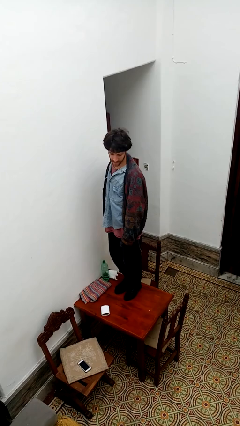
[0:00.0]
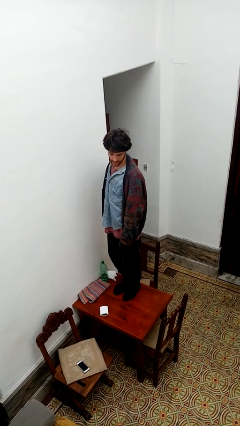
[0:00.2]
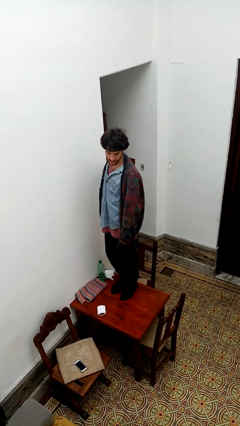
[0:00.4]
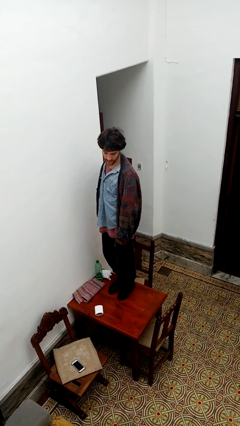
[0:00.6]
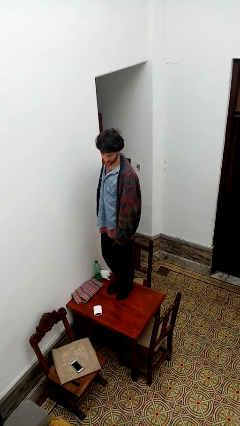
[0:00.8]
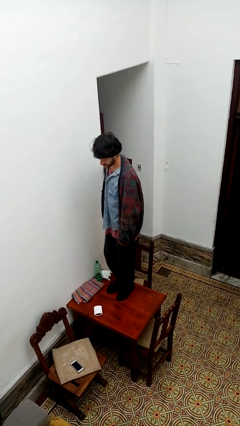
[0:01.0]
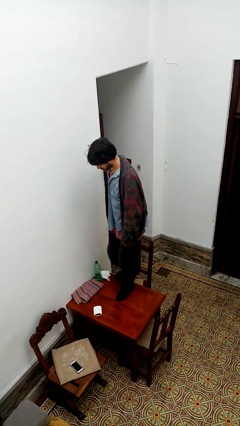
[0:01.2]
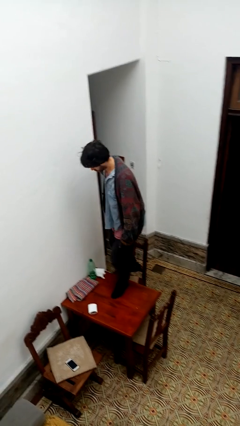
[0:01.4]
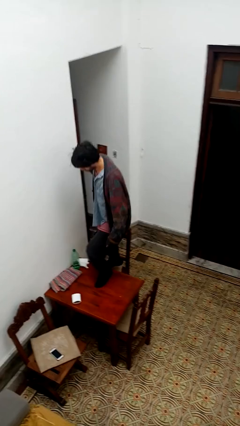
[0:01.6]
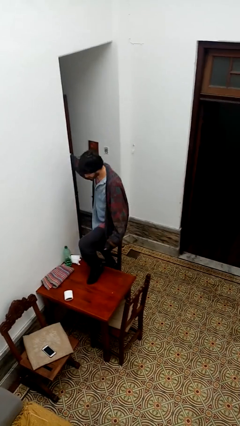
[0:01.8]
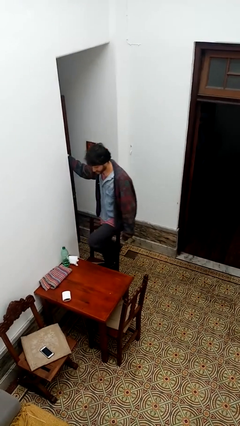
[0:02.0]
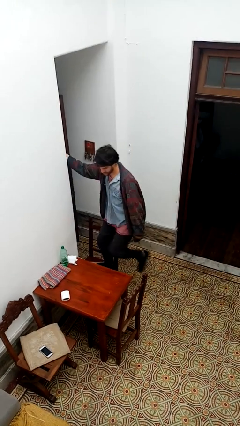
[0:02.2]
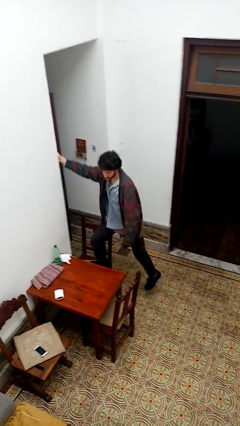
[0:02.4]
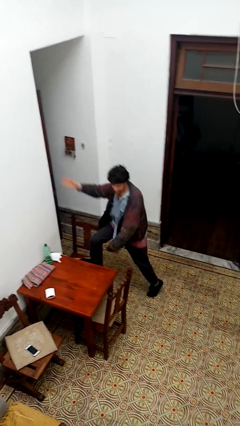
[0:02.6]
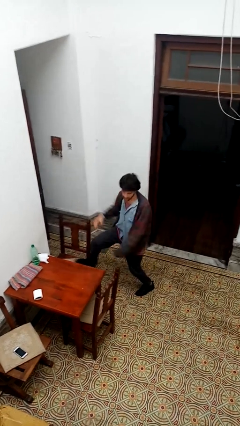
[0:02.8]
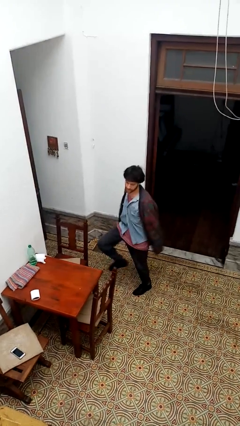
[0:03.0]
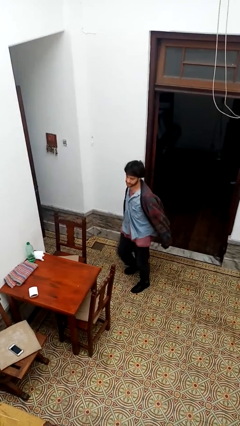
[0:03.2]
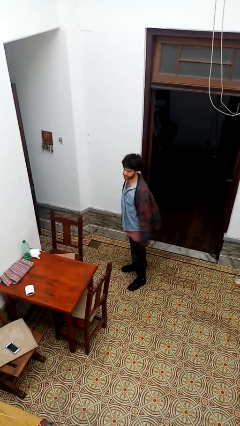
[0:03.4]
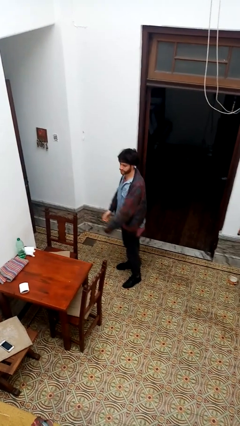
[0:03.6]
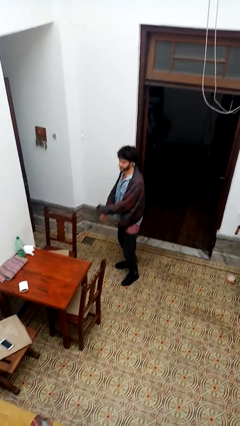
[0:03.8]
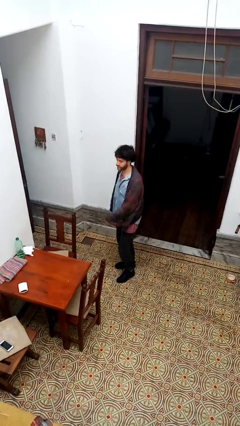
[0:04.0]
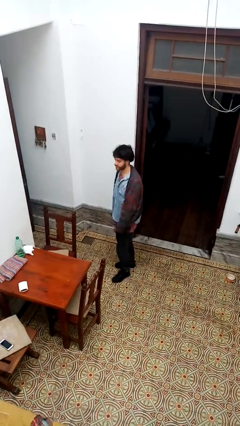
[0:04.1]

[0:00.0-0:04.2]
person climbs off table

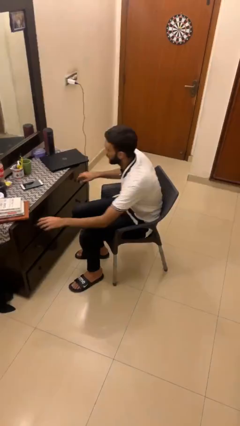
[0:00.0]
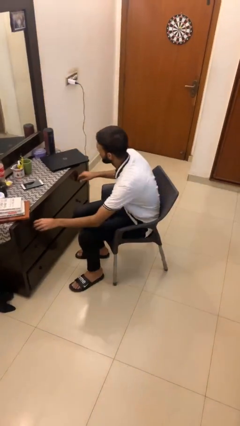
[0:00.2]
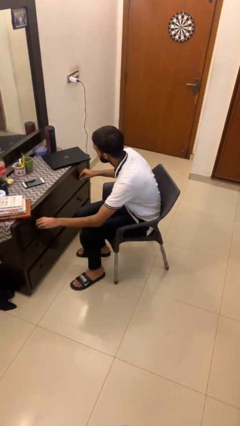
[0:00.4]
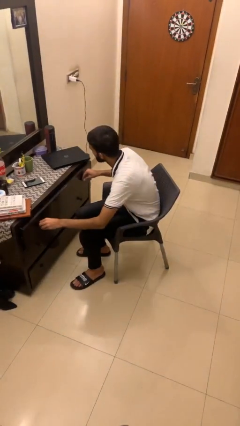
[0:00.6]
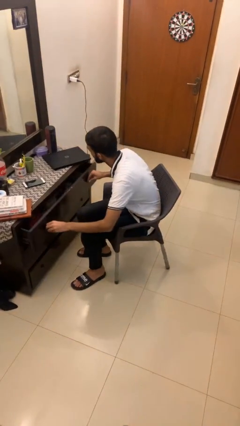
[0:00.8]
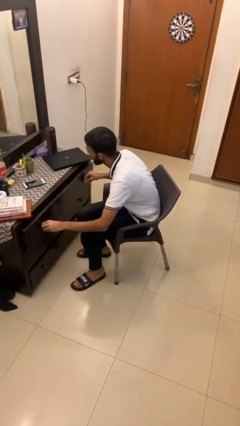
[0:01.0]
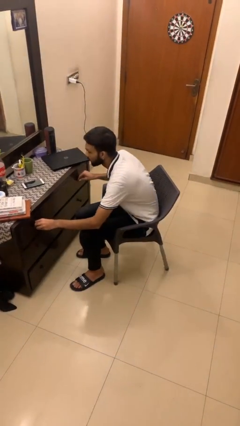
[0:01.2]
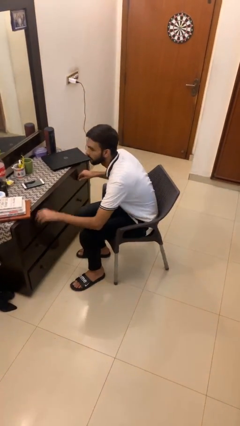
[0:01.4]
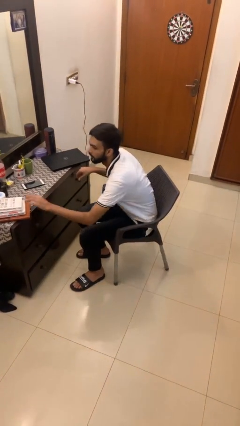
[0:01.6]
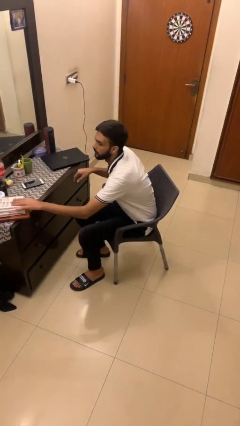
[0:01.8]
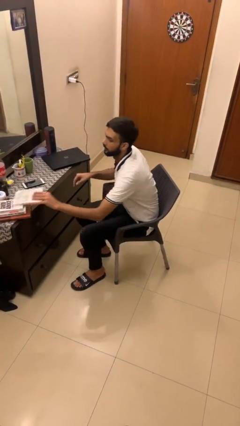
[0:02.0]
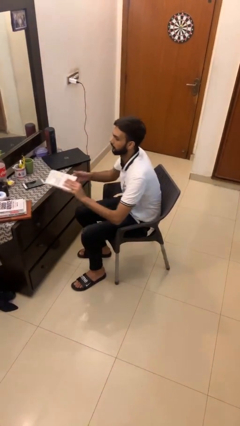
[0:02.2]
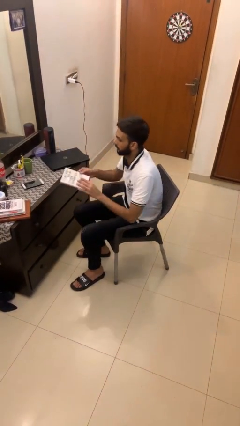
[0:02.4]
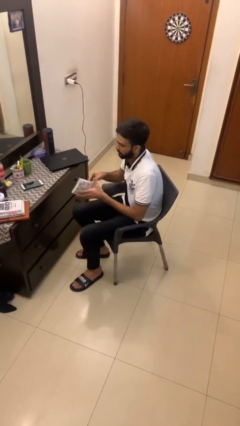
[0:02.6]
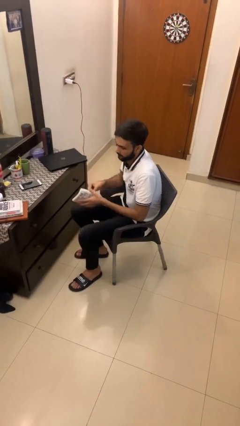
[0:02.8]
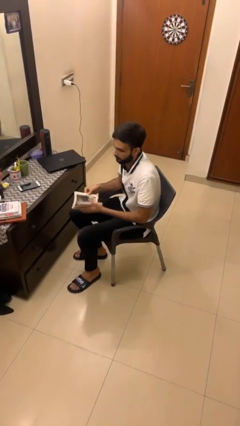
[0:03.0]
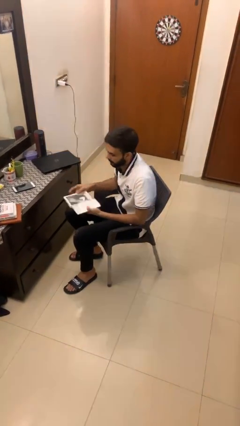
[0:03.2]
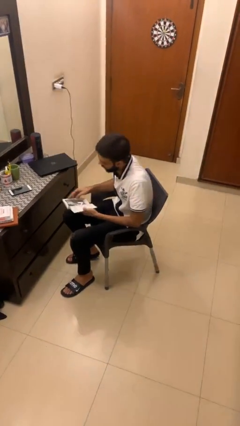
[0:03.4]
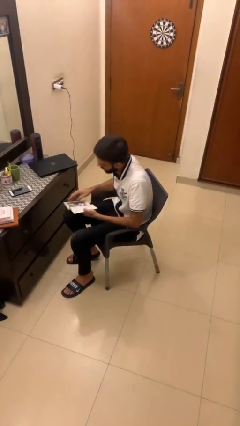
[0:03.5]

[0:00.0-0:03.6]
person picks up object from table

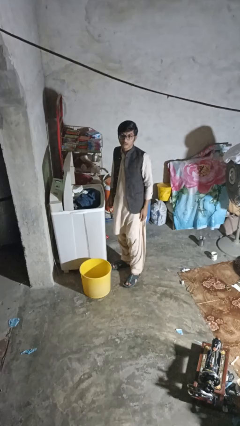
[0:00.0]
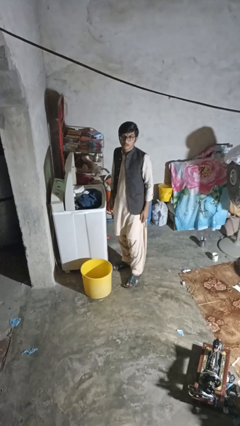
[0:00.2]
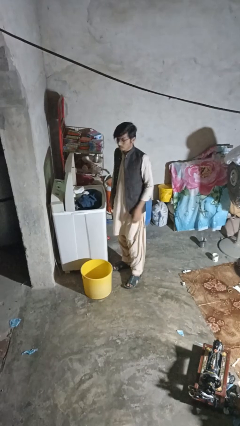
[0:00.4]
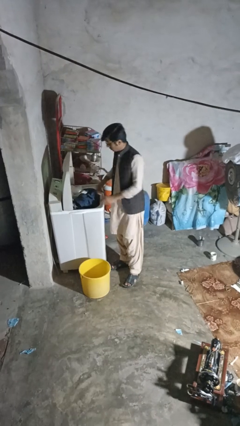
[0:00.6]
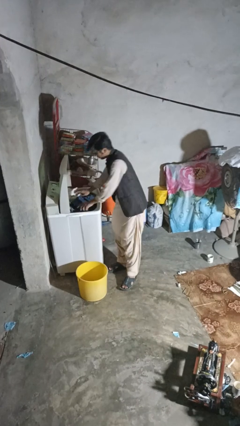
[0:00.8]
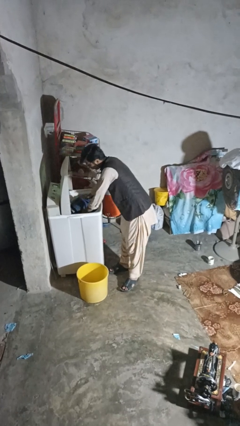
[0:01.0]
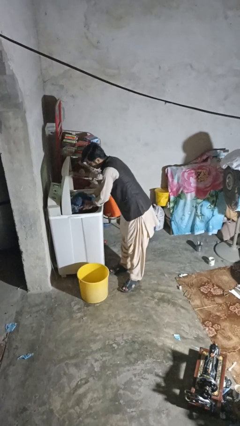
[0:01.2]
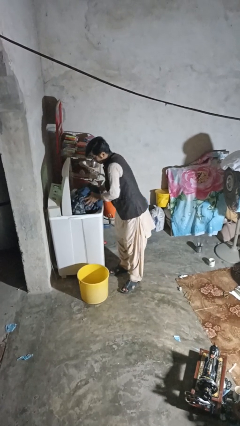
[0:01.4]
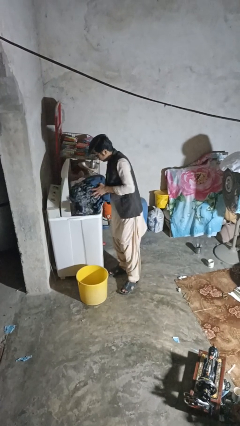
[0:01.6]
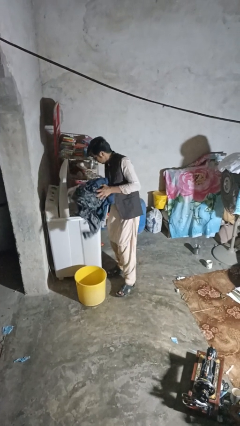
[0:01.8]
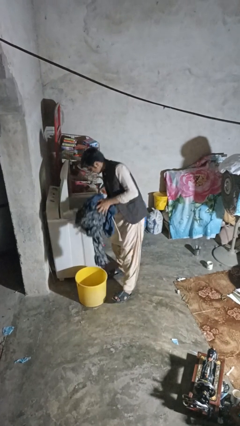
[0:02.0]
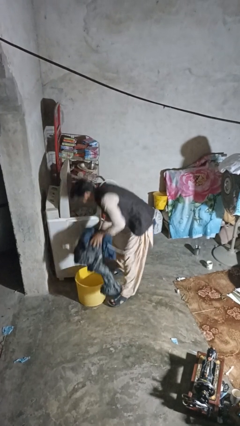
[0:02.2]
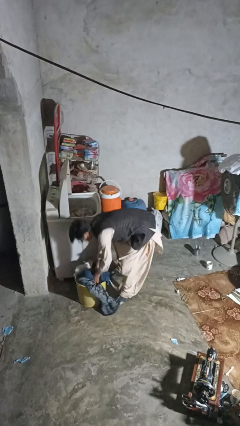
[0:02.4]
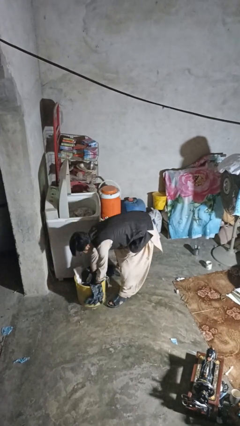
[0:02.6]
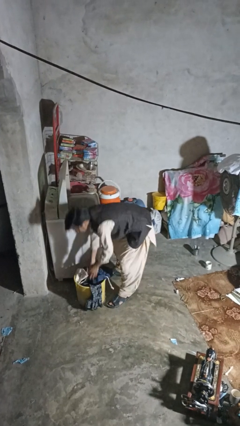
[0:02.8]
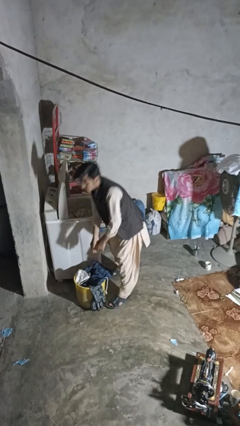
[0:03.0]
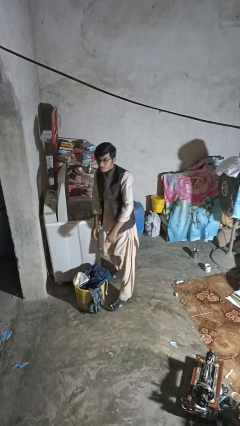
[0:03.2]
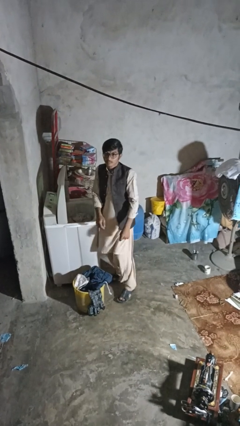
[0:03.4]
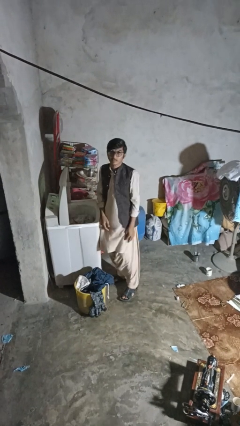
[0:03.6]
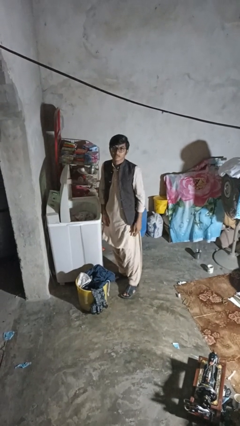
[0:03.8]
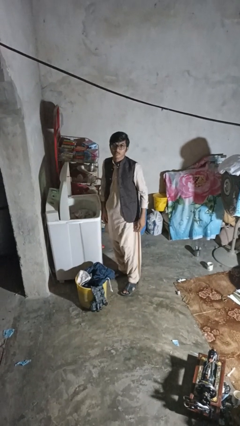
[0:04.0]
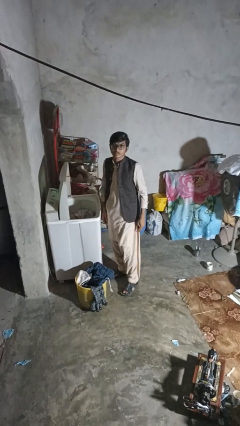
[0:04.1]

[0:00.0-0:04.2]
person unloads dryer

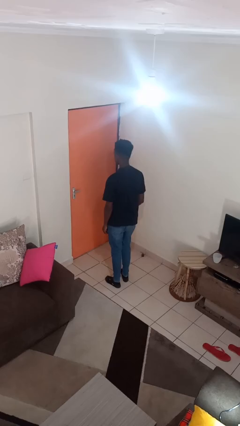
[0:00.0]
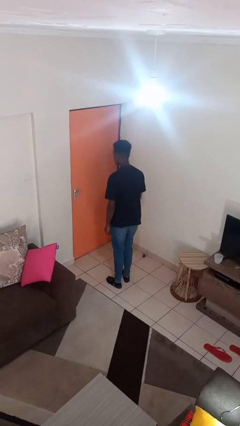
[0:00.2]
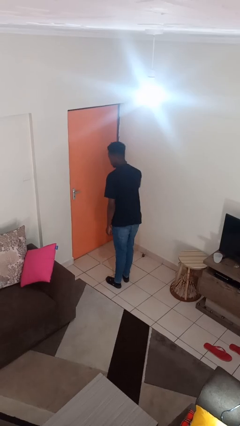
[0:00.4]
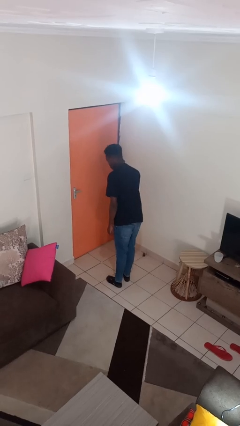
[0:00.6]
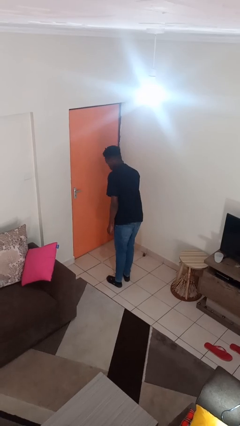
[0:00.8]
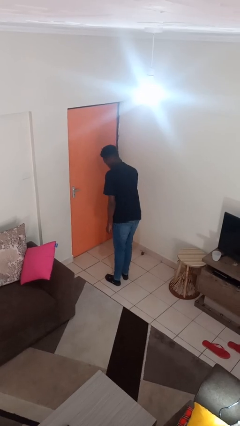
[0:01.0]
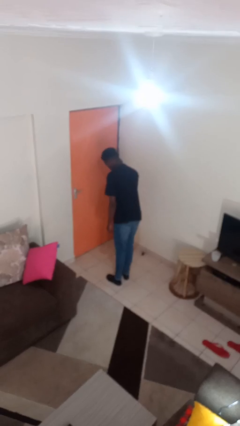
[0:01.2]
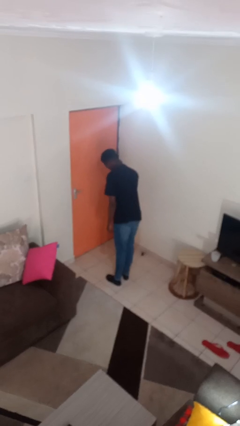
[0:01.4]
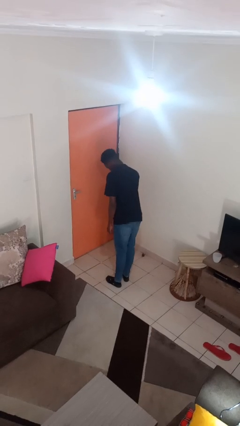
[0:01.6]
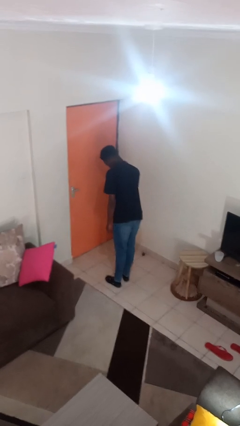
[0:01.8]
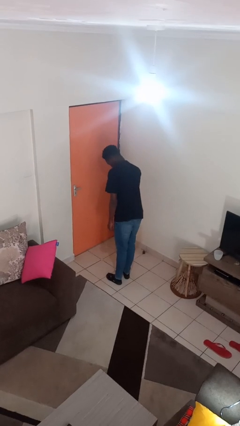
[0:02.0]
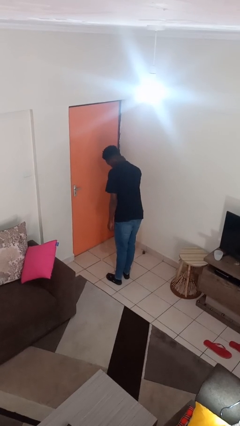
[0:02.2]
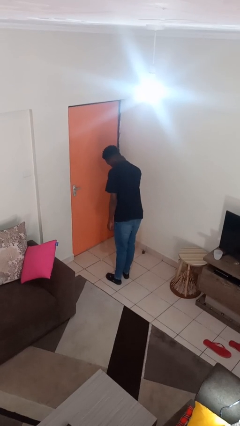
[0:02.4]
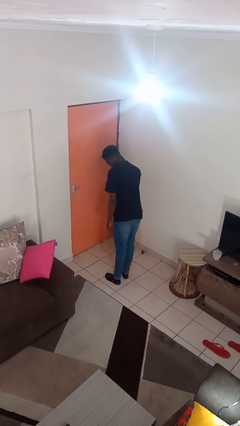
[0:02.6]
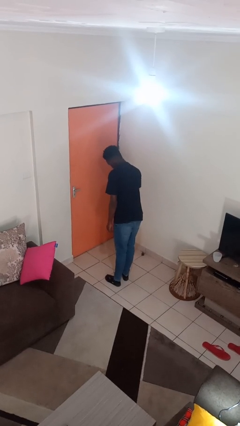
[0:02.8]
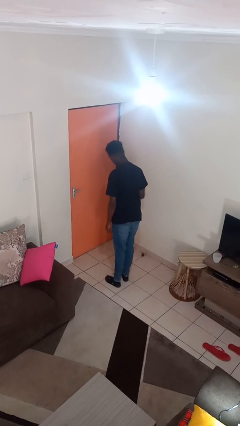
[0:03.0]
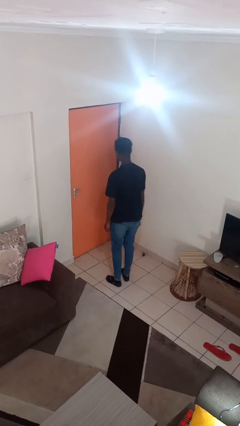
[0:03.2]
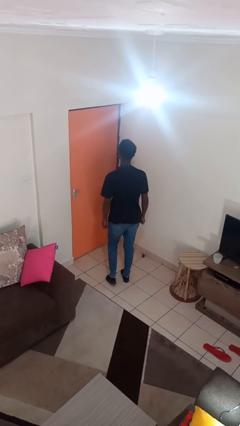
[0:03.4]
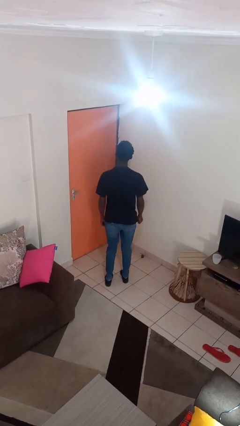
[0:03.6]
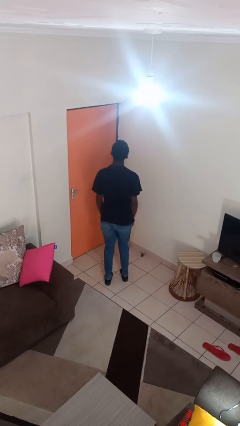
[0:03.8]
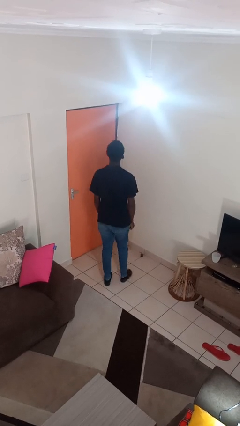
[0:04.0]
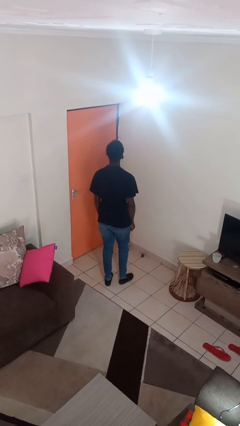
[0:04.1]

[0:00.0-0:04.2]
person gestures listen closely

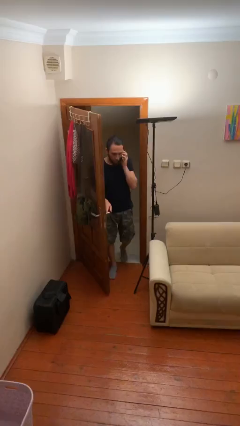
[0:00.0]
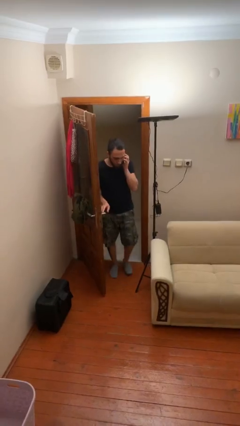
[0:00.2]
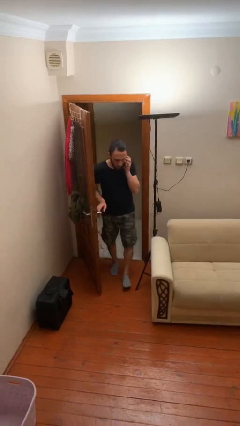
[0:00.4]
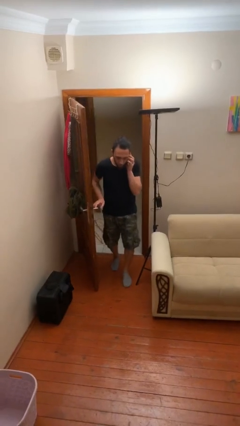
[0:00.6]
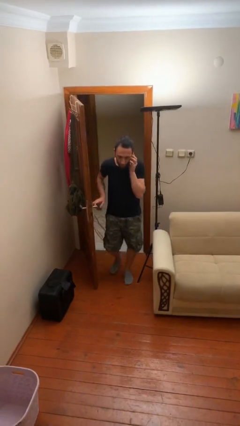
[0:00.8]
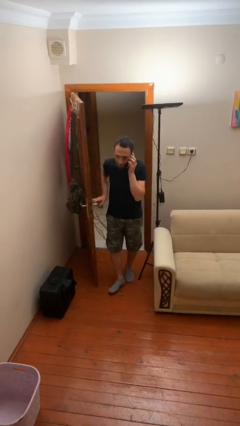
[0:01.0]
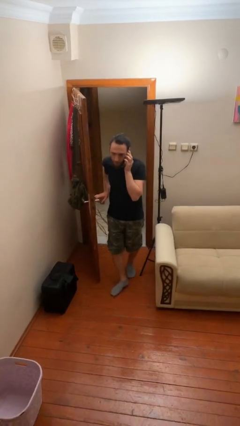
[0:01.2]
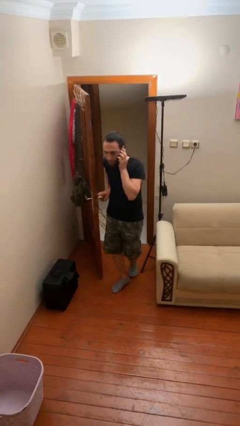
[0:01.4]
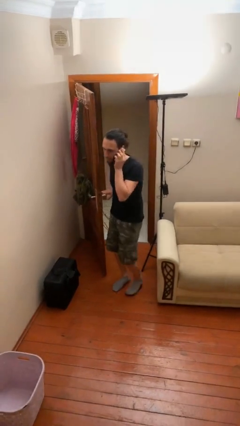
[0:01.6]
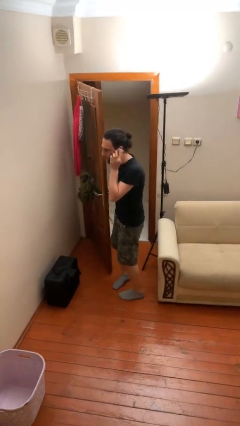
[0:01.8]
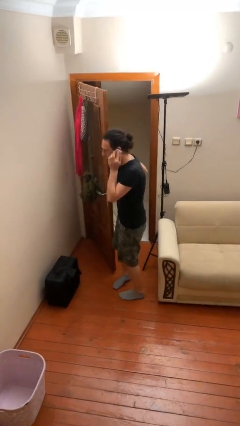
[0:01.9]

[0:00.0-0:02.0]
person enters scene through structure
